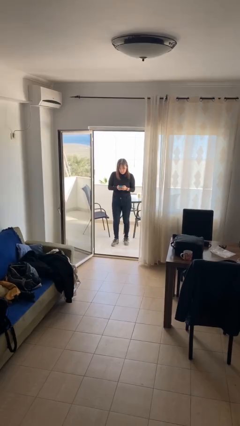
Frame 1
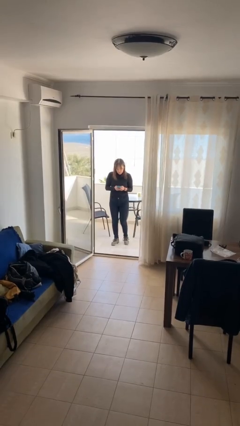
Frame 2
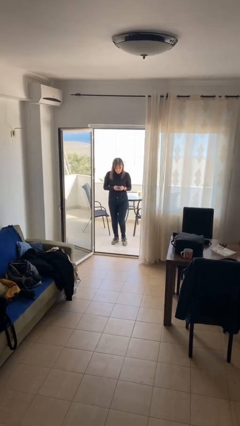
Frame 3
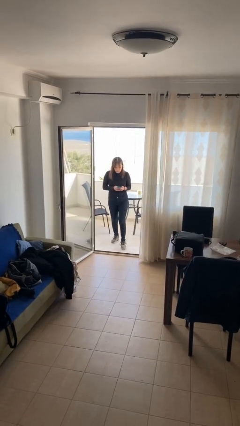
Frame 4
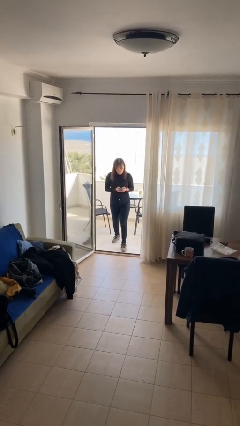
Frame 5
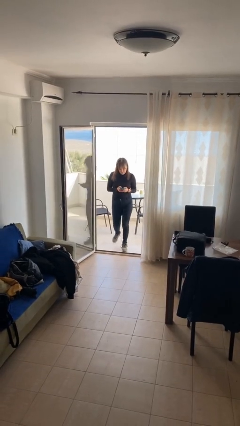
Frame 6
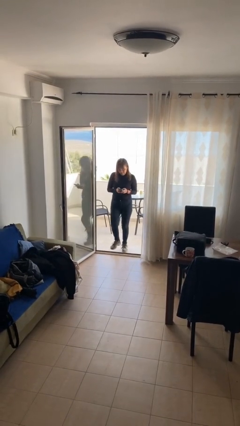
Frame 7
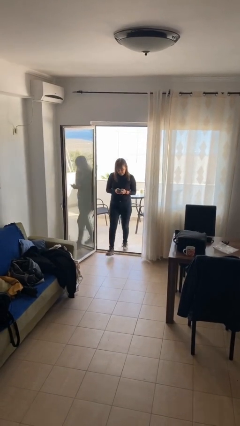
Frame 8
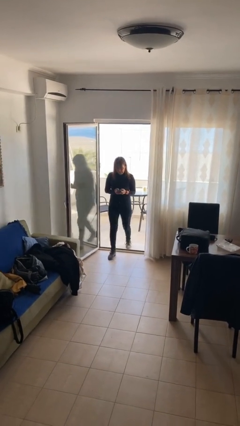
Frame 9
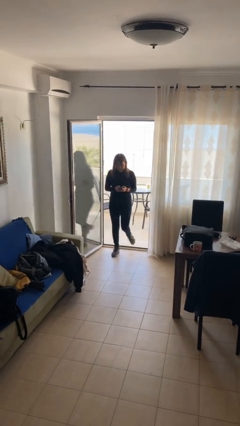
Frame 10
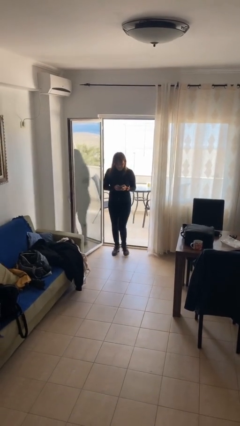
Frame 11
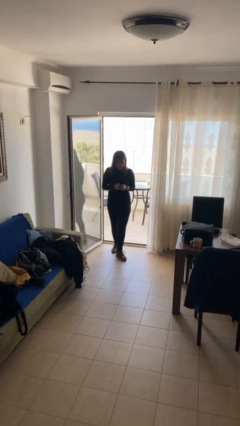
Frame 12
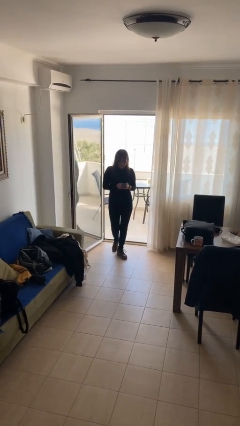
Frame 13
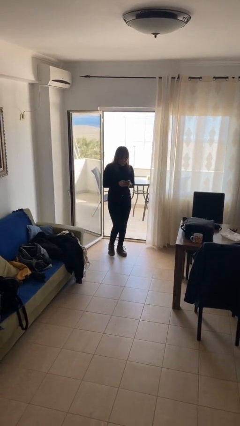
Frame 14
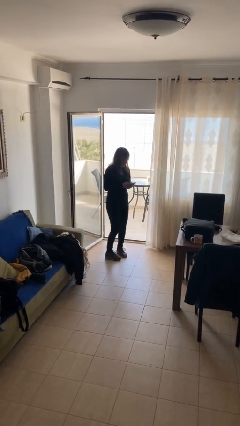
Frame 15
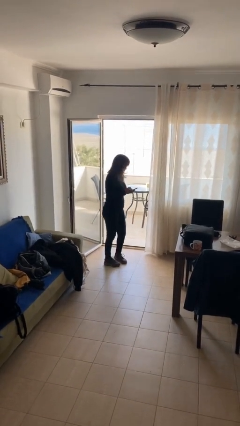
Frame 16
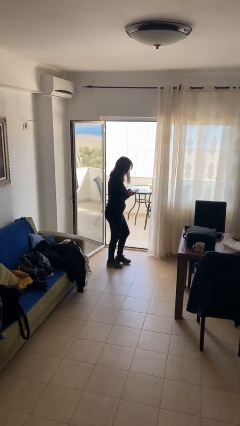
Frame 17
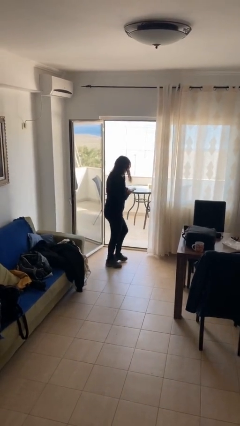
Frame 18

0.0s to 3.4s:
person enters scene through structure

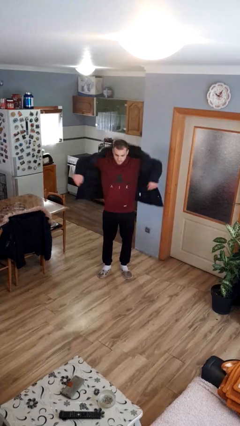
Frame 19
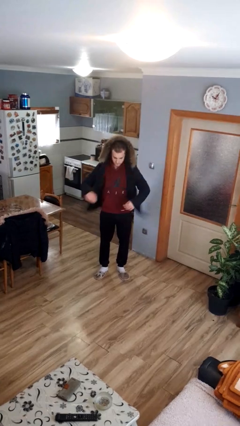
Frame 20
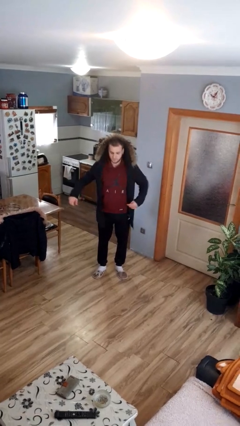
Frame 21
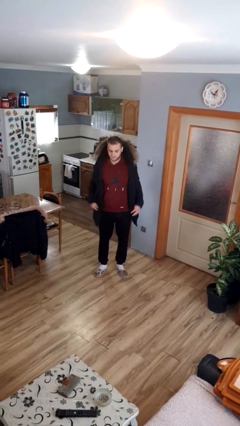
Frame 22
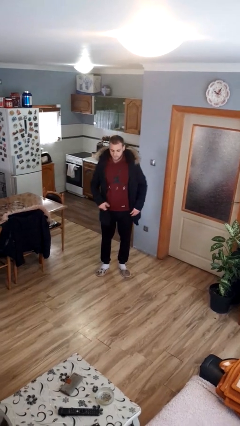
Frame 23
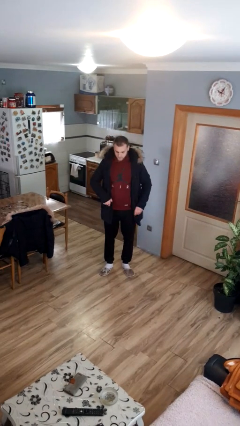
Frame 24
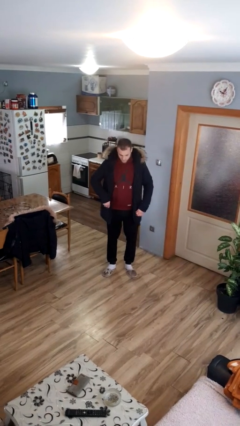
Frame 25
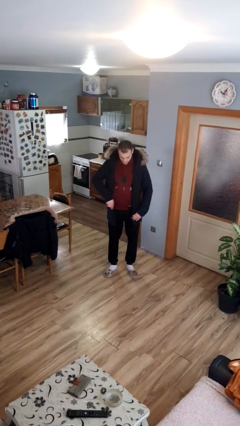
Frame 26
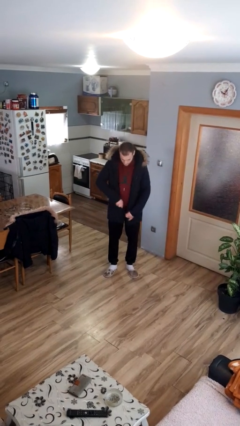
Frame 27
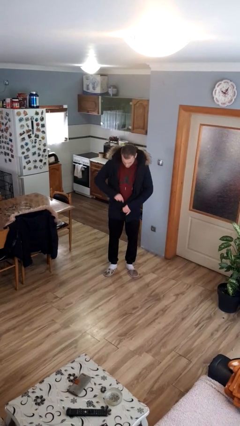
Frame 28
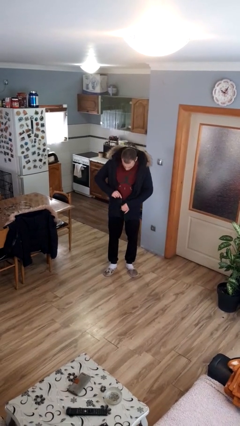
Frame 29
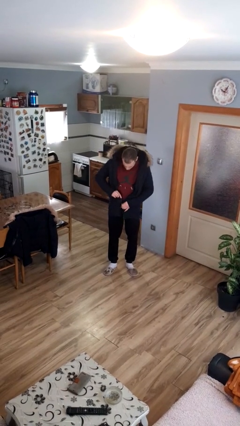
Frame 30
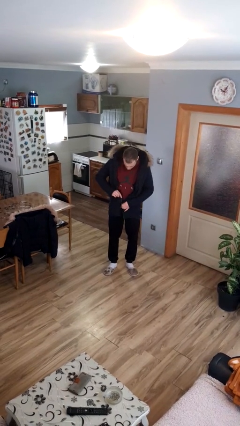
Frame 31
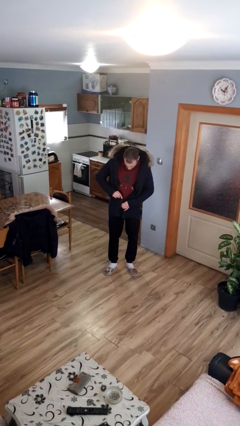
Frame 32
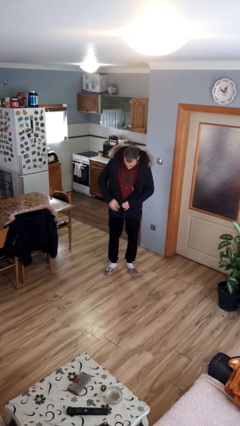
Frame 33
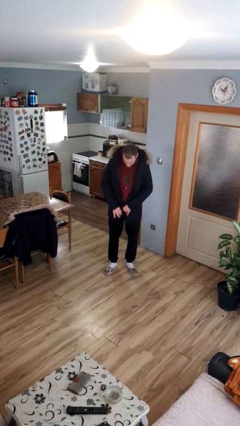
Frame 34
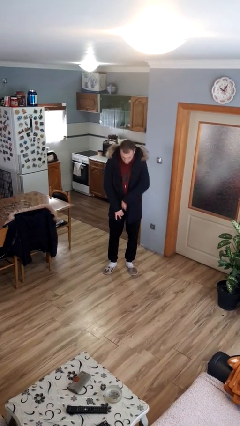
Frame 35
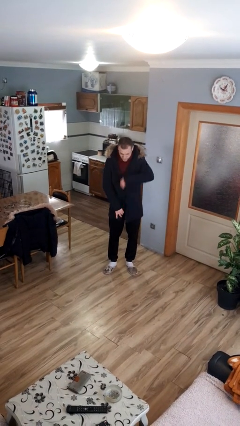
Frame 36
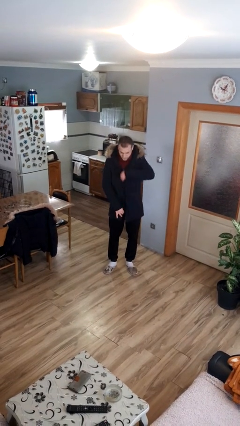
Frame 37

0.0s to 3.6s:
person puts on jacket

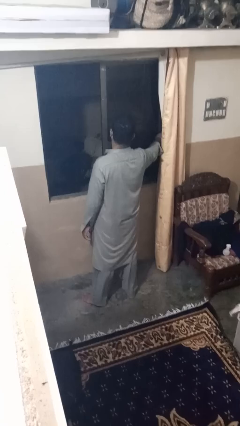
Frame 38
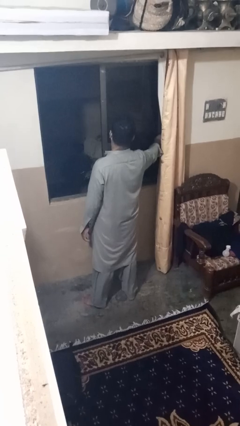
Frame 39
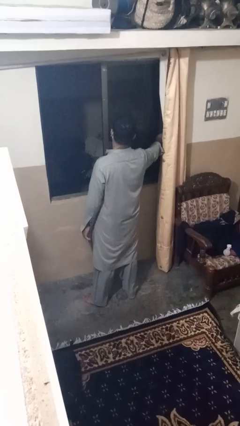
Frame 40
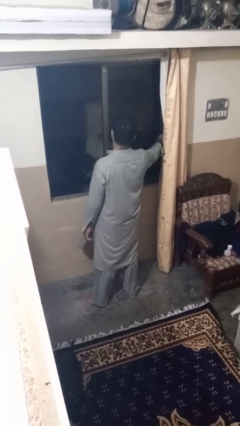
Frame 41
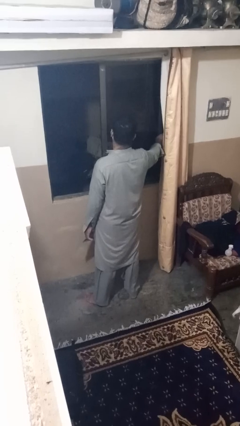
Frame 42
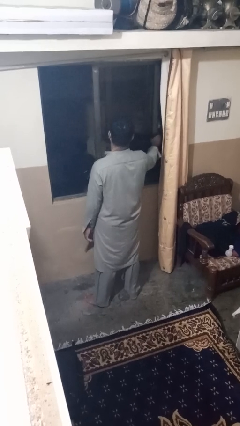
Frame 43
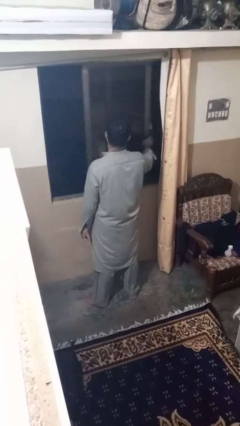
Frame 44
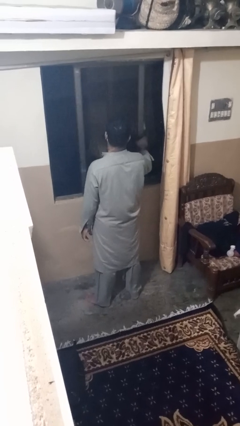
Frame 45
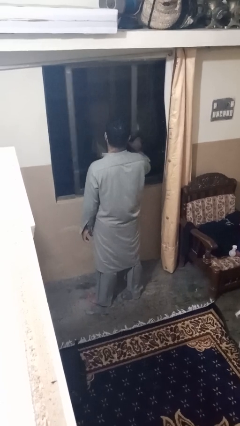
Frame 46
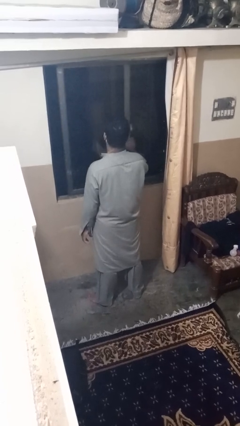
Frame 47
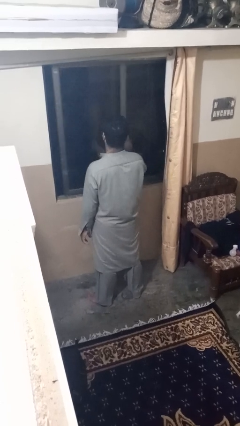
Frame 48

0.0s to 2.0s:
person closes home window

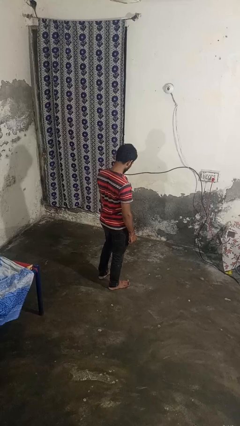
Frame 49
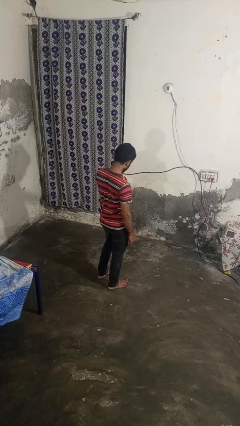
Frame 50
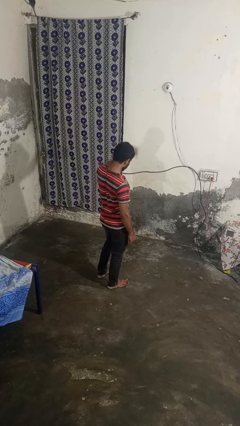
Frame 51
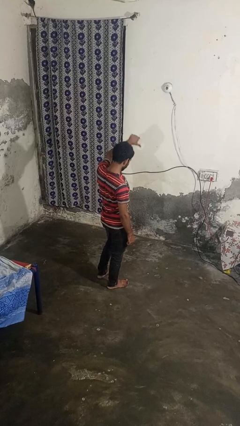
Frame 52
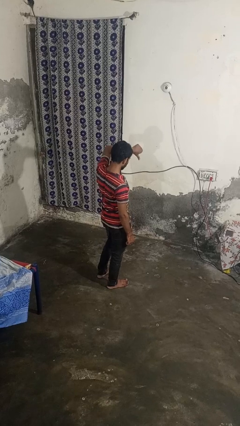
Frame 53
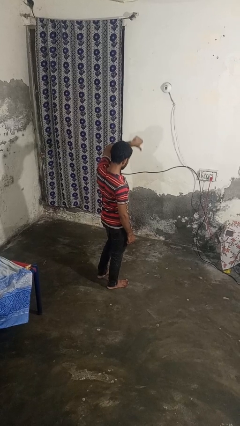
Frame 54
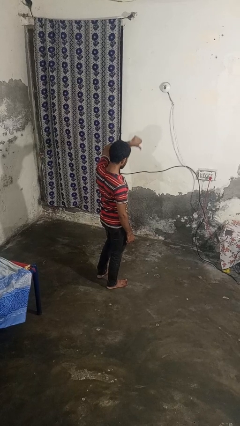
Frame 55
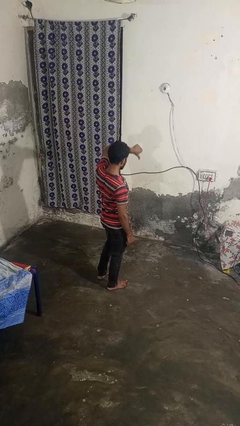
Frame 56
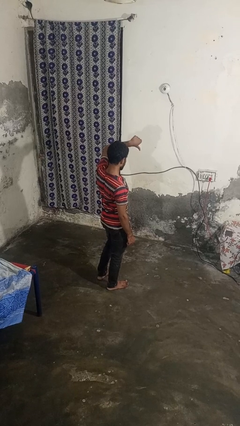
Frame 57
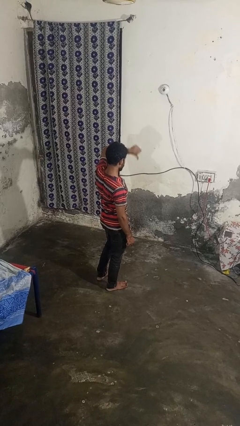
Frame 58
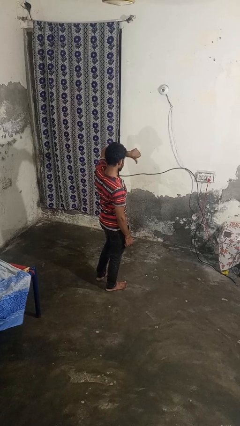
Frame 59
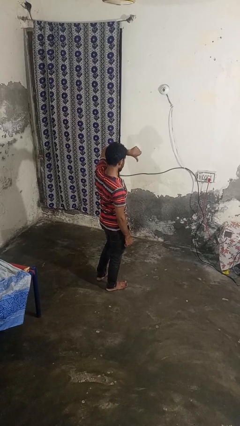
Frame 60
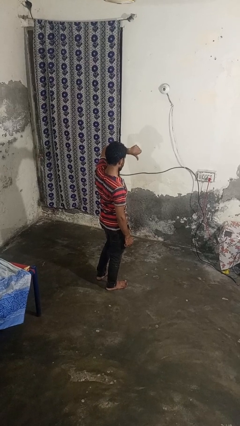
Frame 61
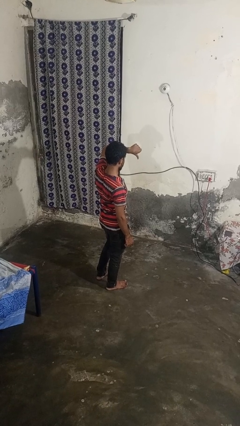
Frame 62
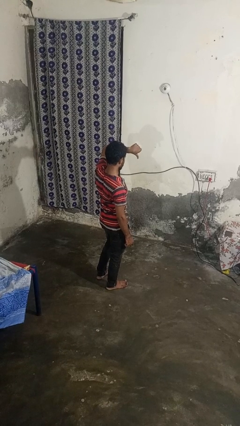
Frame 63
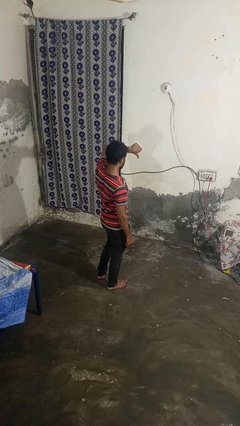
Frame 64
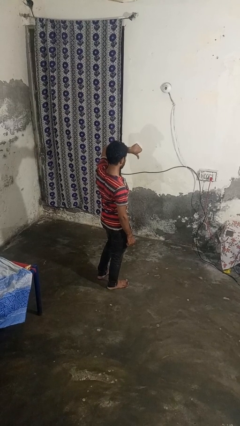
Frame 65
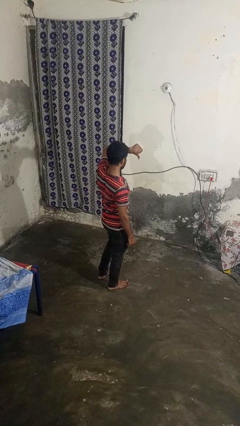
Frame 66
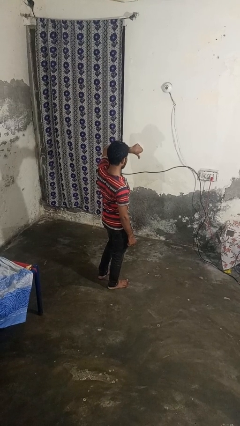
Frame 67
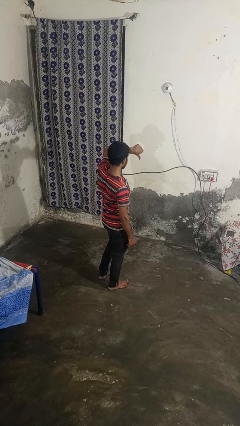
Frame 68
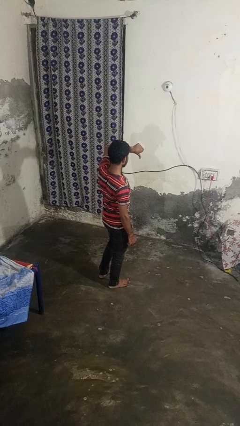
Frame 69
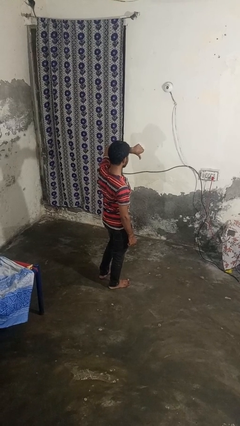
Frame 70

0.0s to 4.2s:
person gestures thumbs down

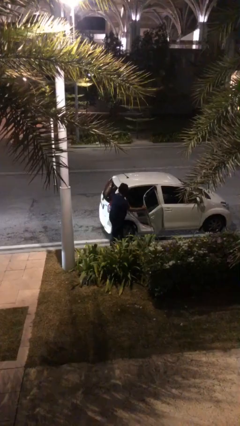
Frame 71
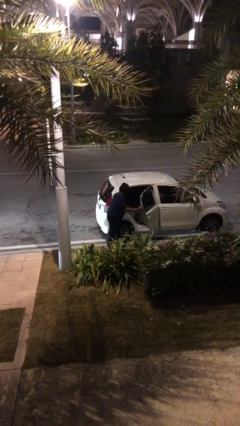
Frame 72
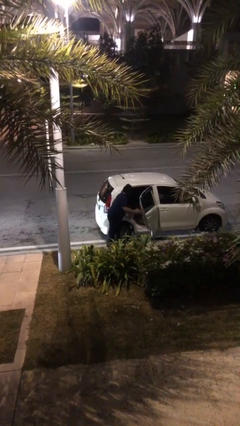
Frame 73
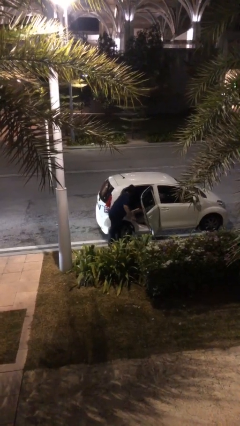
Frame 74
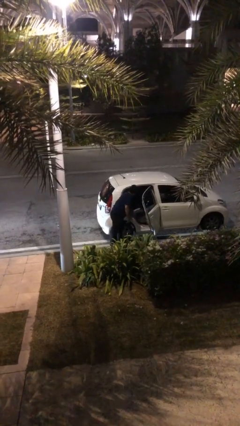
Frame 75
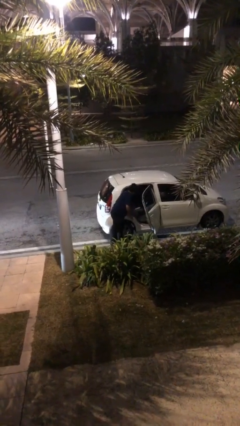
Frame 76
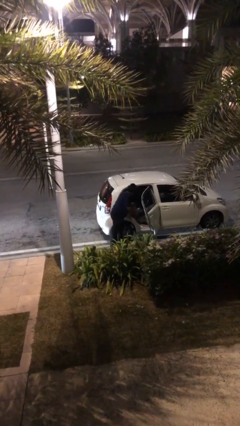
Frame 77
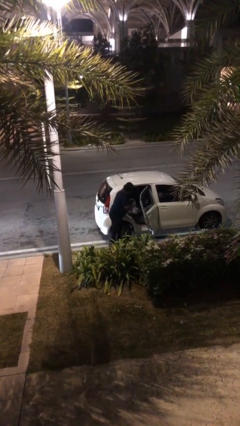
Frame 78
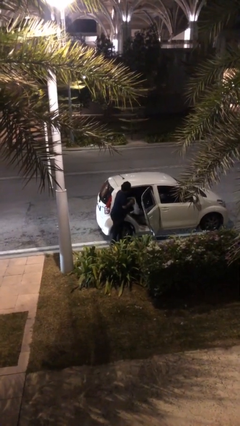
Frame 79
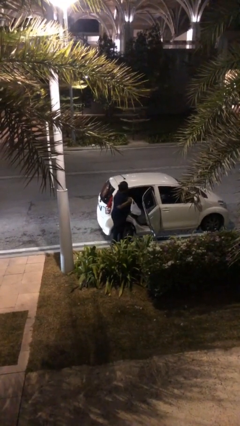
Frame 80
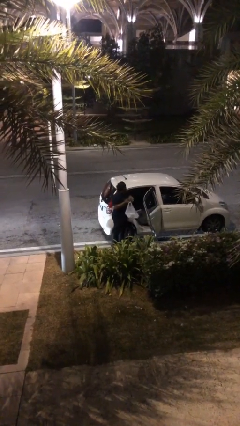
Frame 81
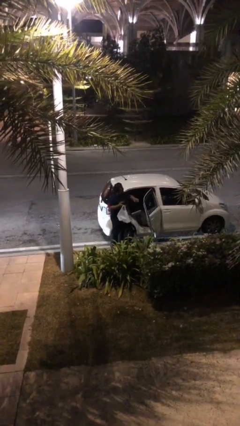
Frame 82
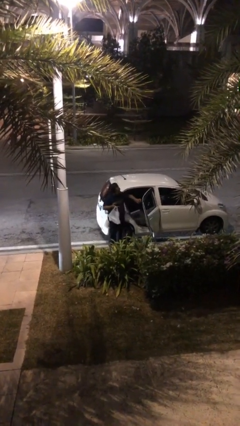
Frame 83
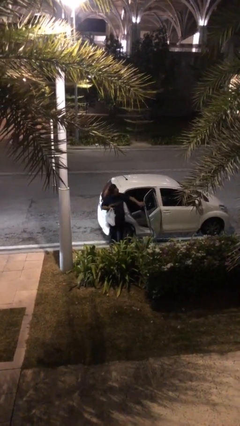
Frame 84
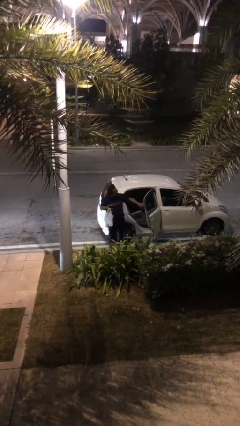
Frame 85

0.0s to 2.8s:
person unloads car

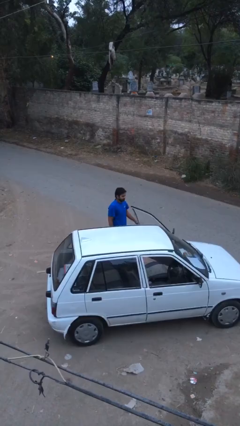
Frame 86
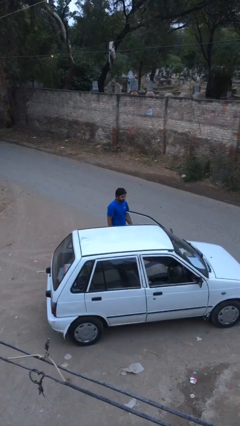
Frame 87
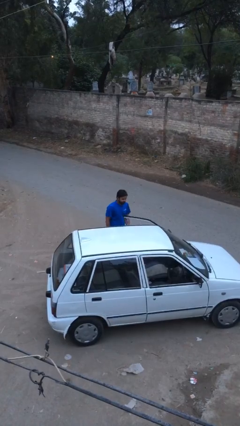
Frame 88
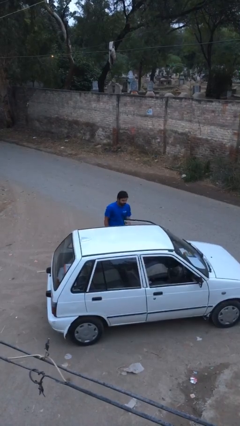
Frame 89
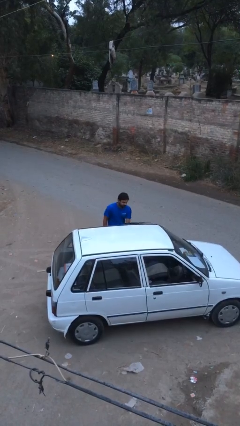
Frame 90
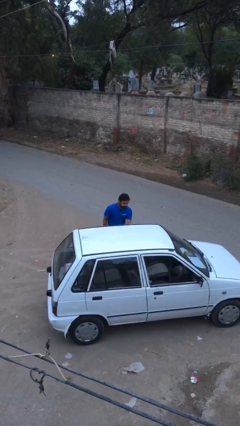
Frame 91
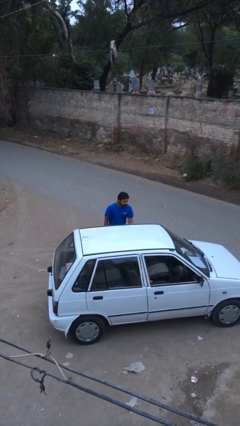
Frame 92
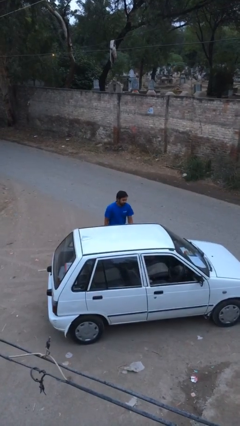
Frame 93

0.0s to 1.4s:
person closes car door
